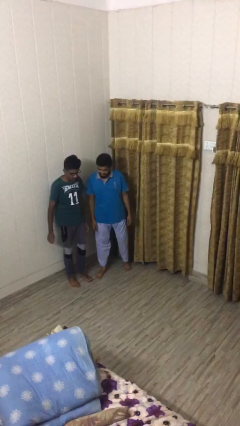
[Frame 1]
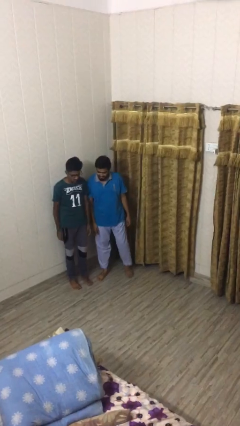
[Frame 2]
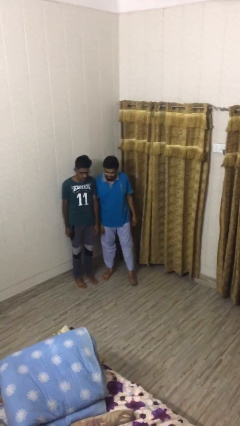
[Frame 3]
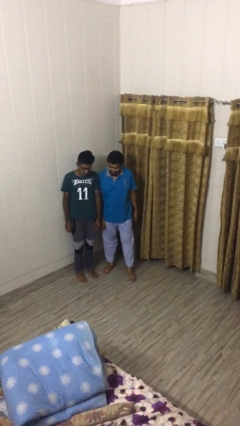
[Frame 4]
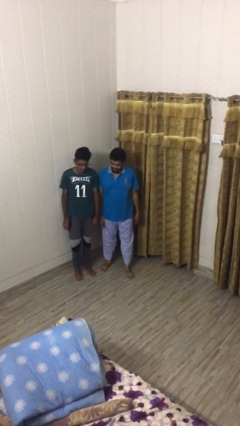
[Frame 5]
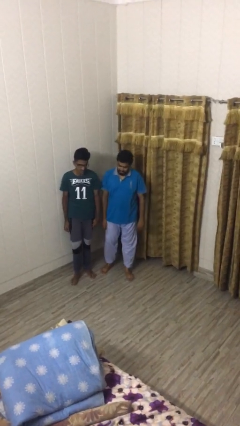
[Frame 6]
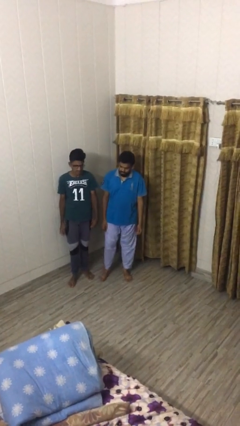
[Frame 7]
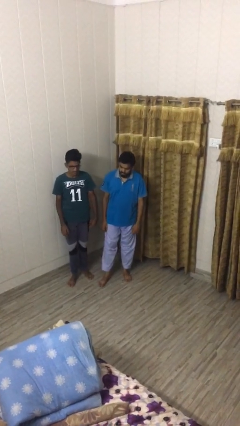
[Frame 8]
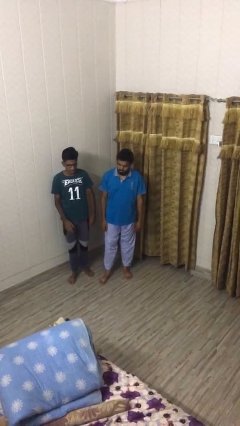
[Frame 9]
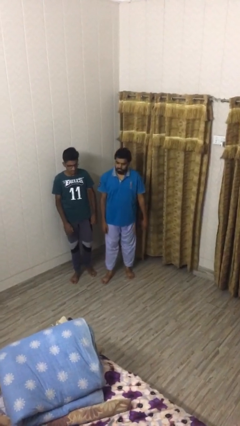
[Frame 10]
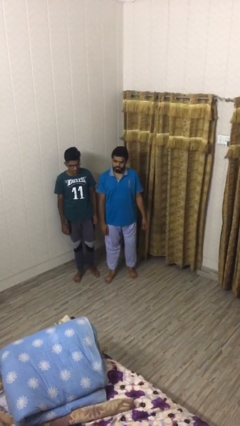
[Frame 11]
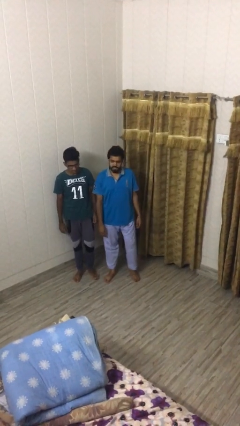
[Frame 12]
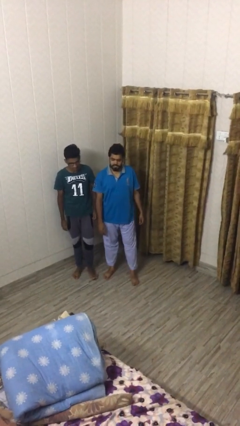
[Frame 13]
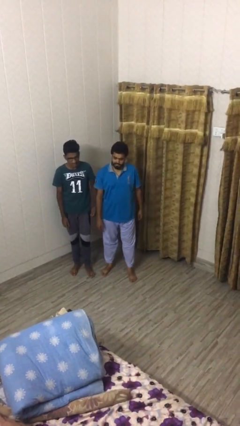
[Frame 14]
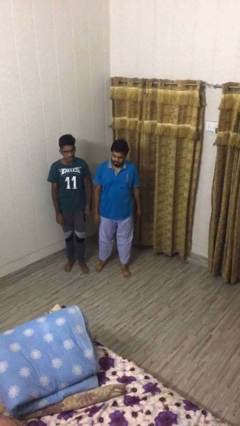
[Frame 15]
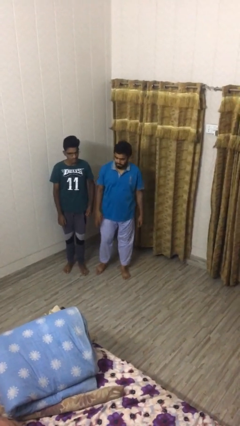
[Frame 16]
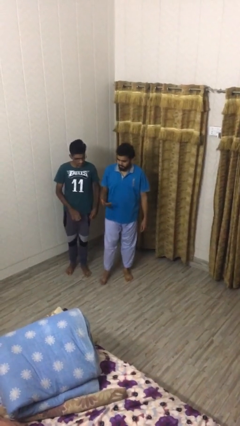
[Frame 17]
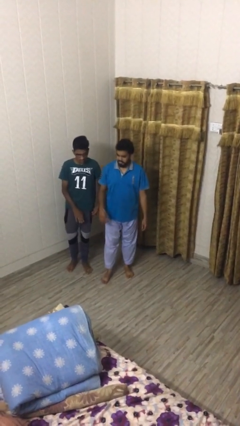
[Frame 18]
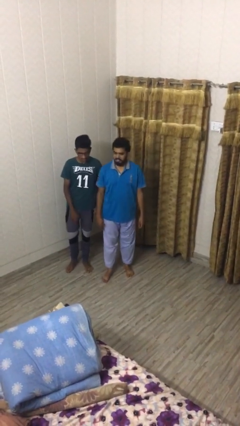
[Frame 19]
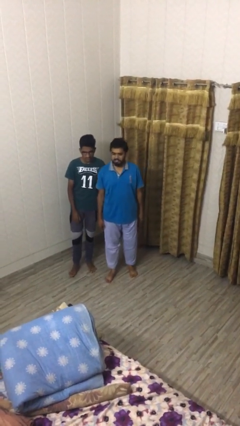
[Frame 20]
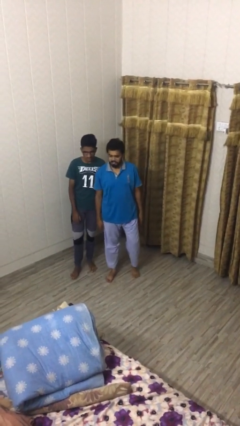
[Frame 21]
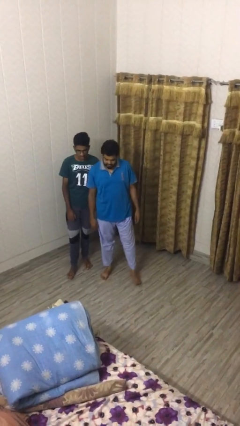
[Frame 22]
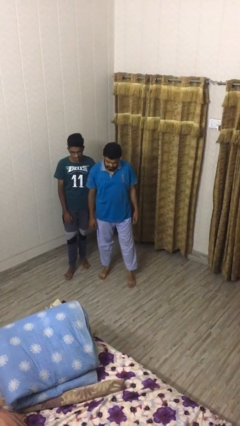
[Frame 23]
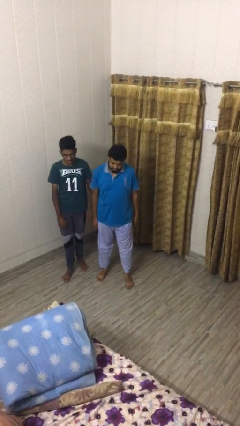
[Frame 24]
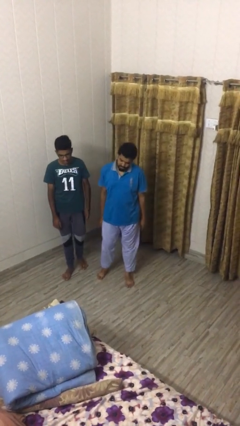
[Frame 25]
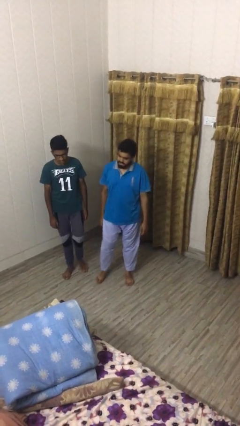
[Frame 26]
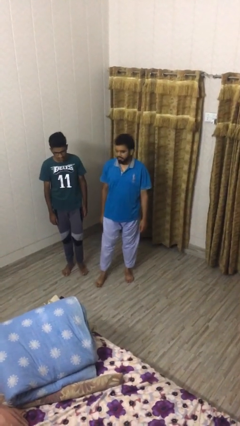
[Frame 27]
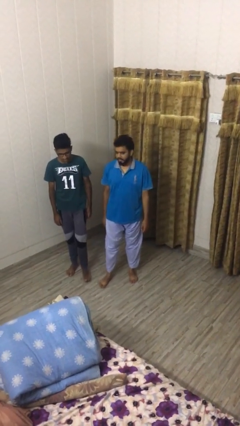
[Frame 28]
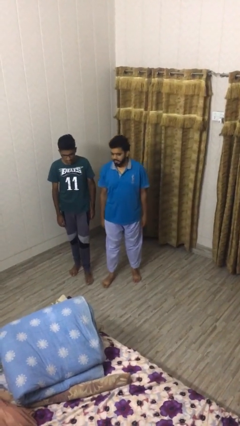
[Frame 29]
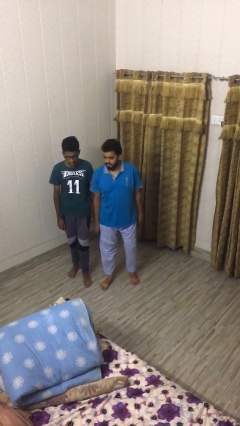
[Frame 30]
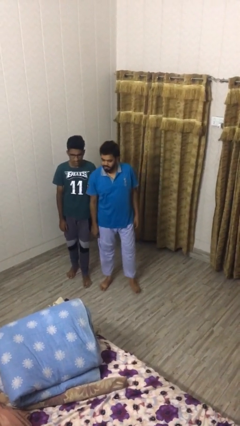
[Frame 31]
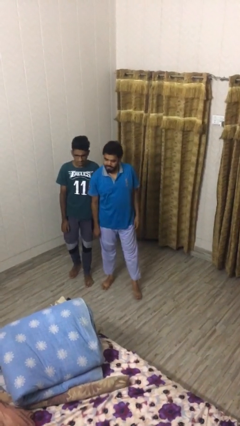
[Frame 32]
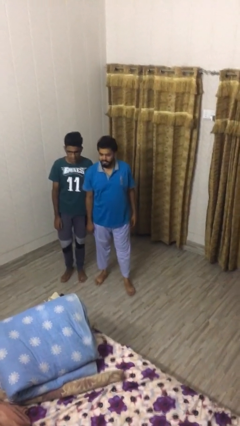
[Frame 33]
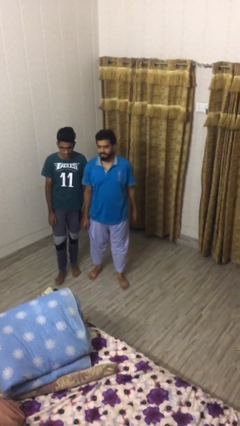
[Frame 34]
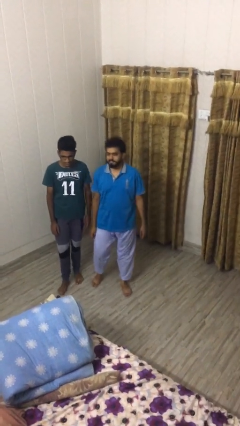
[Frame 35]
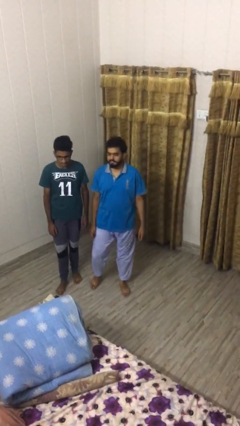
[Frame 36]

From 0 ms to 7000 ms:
person talks to person

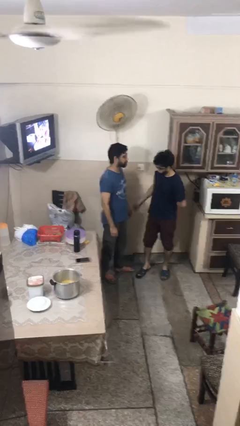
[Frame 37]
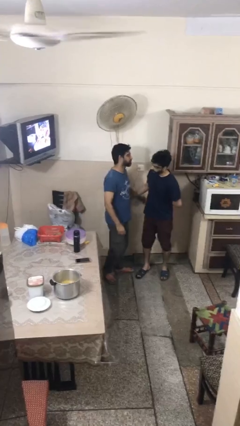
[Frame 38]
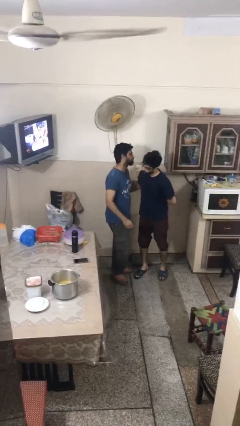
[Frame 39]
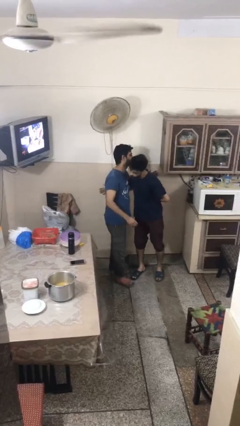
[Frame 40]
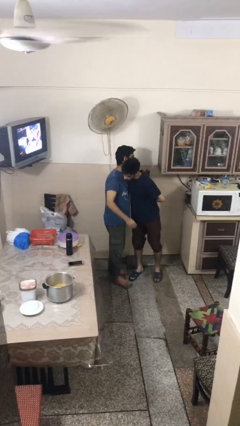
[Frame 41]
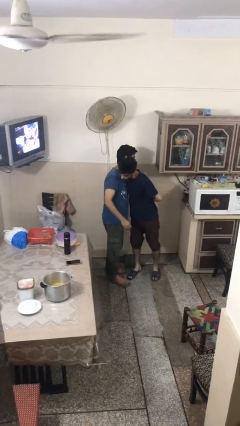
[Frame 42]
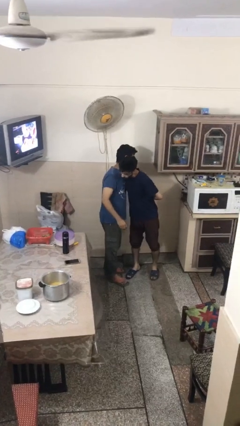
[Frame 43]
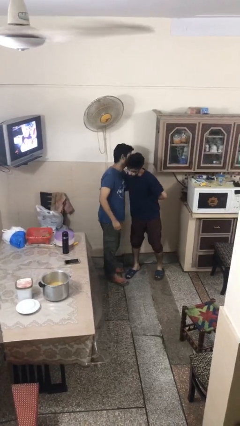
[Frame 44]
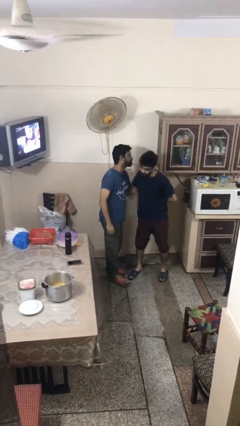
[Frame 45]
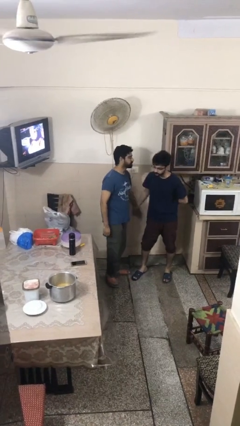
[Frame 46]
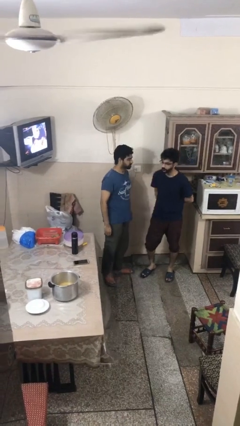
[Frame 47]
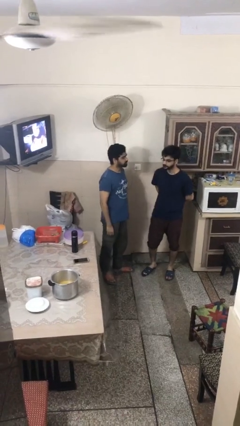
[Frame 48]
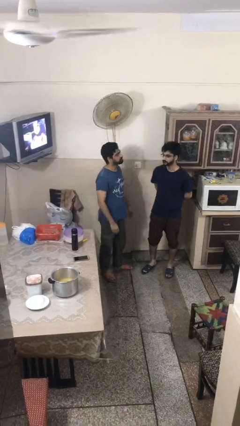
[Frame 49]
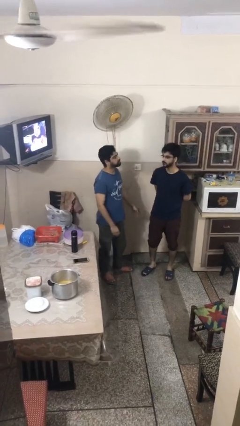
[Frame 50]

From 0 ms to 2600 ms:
person embraces person

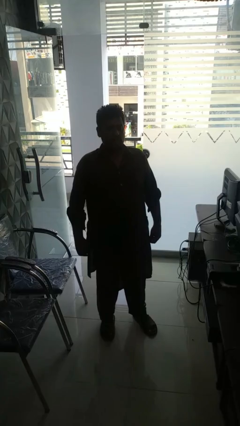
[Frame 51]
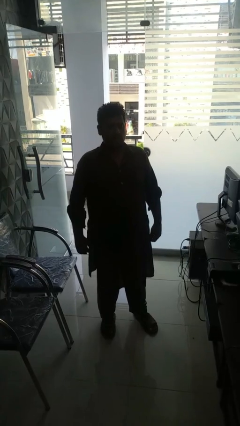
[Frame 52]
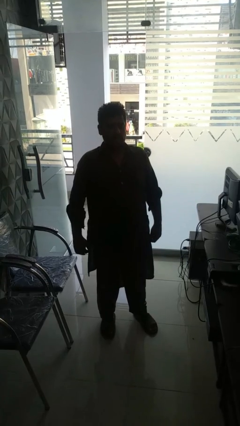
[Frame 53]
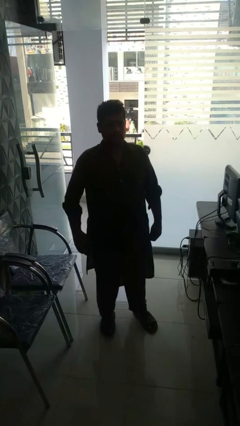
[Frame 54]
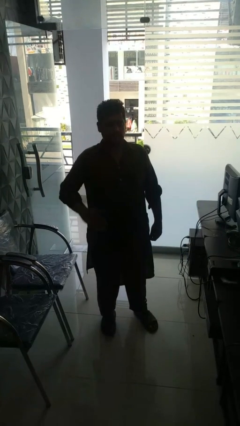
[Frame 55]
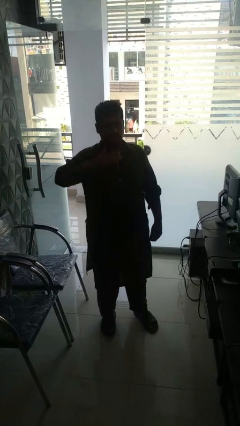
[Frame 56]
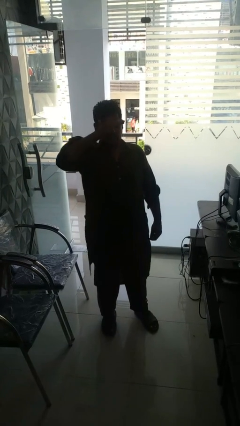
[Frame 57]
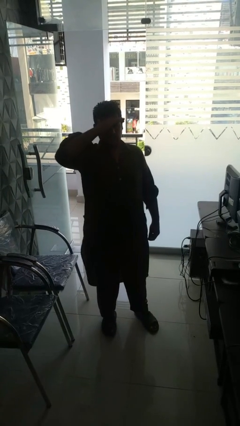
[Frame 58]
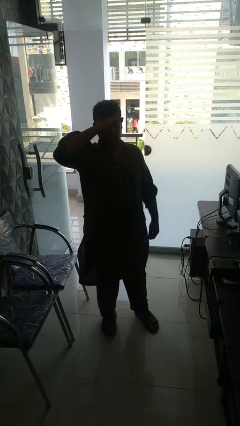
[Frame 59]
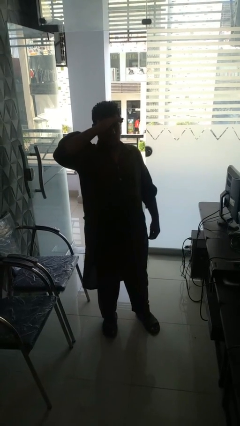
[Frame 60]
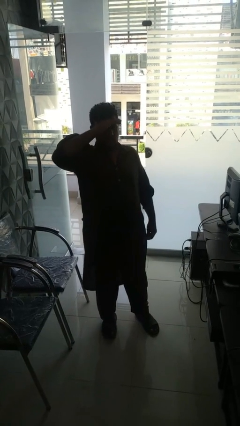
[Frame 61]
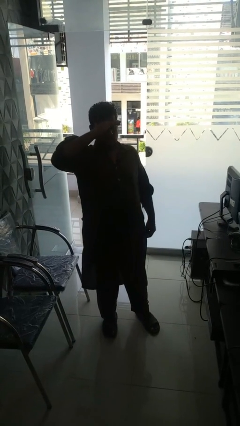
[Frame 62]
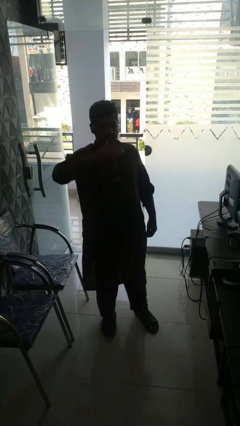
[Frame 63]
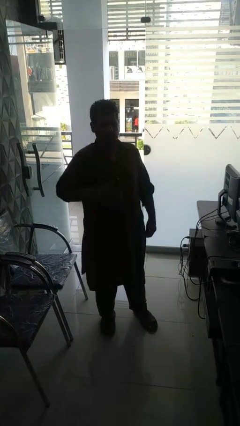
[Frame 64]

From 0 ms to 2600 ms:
person shades eyes

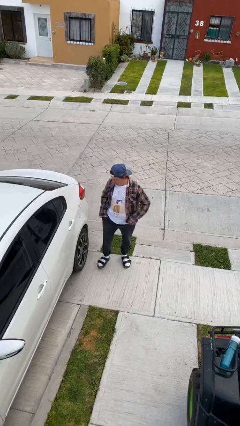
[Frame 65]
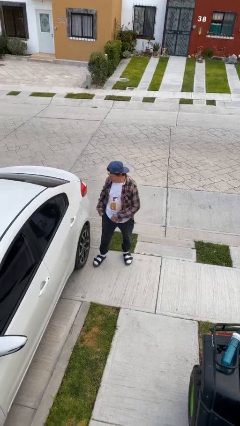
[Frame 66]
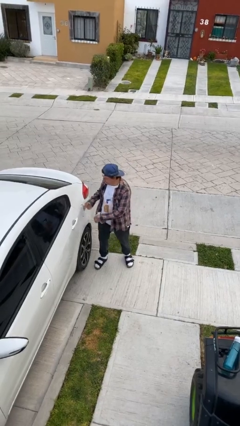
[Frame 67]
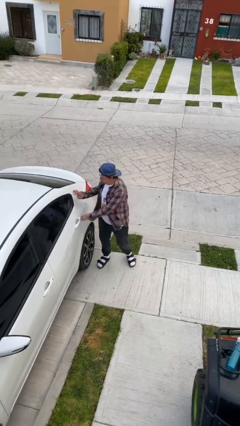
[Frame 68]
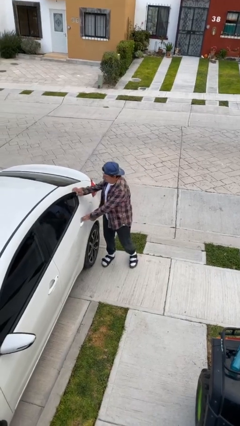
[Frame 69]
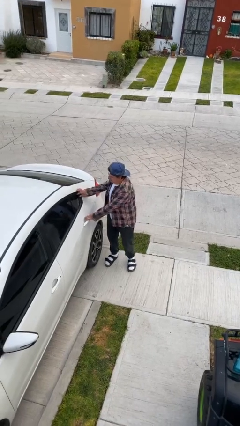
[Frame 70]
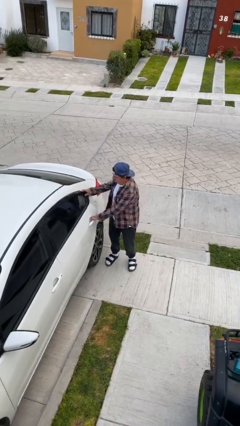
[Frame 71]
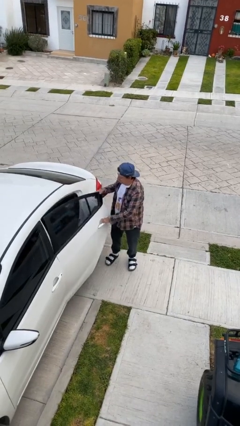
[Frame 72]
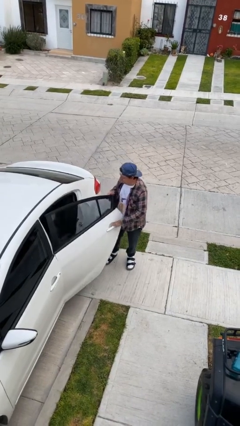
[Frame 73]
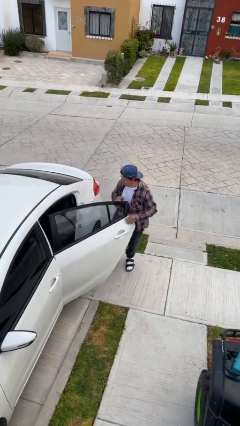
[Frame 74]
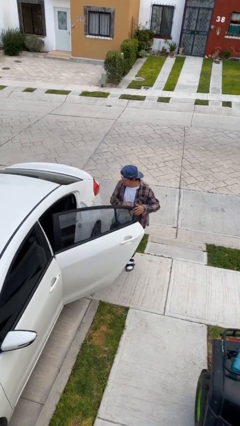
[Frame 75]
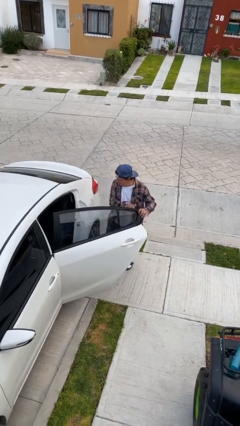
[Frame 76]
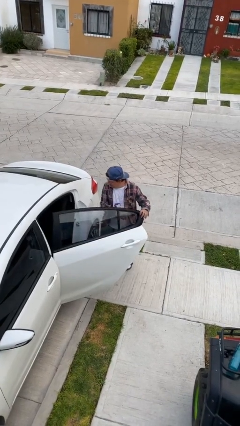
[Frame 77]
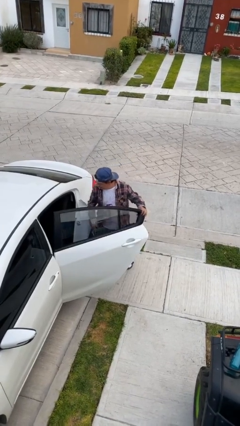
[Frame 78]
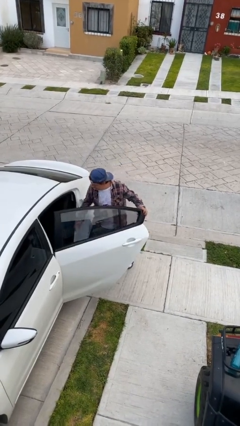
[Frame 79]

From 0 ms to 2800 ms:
person opens car door

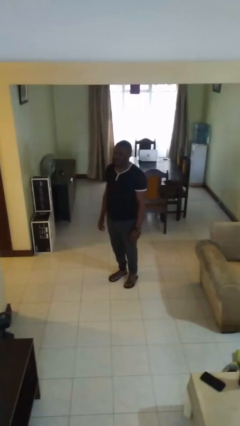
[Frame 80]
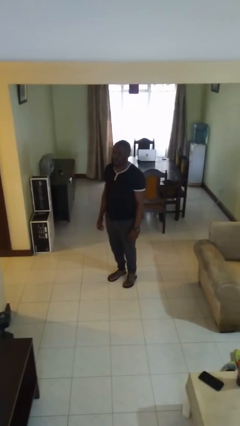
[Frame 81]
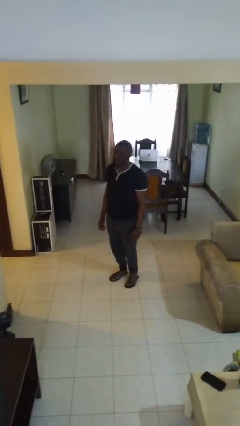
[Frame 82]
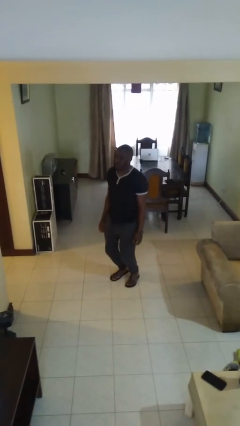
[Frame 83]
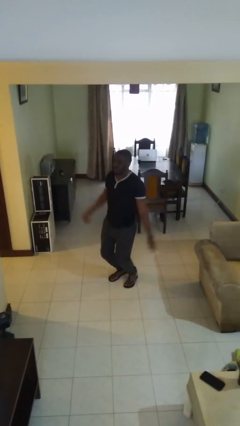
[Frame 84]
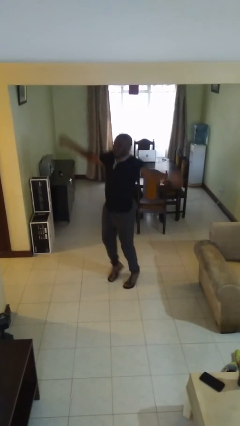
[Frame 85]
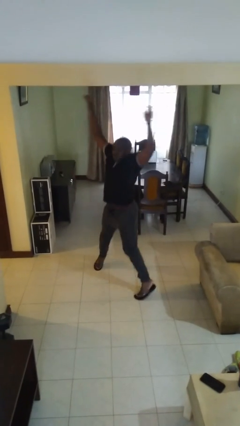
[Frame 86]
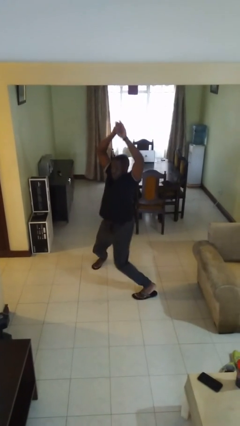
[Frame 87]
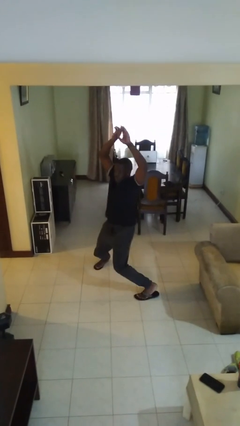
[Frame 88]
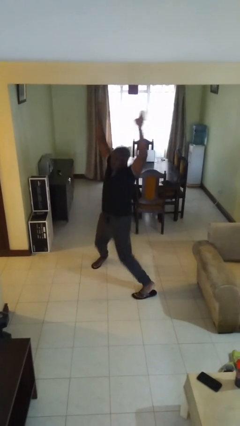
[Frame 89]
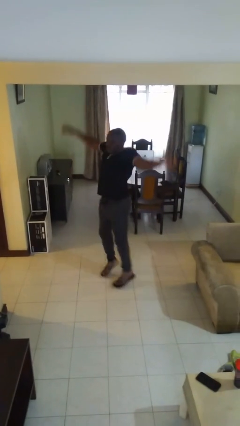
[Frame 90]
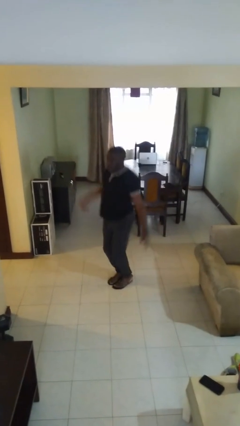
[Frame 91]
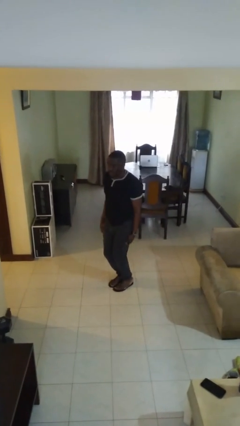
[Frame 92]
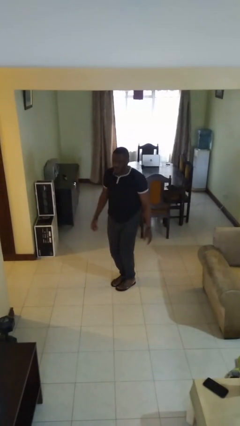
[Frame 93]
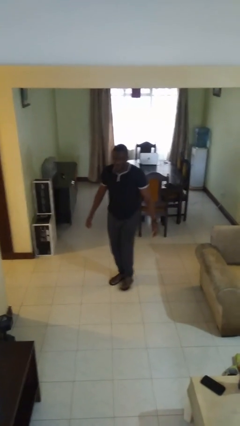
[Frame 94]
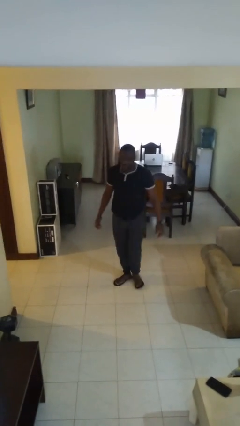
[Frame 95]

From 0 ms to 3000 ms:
person exercises with jumping jacks
